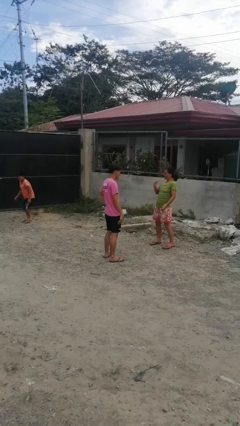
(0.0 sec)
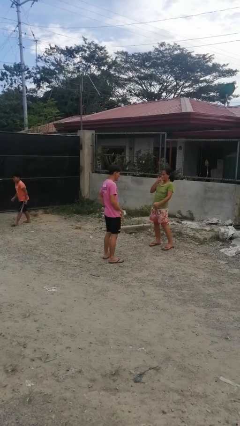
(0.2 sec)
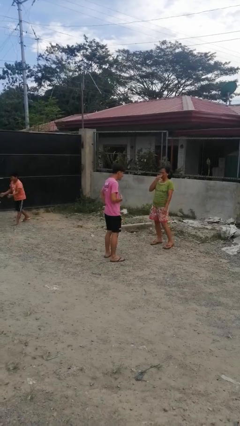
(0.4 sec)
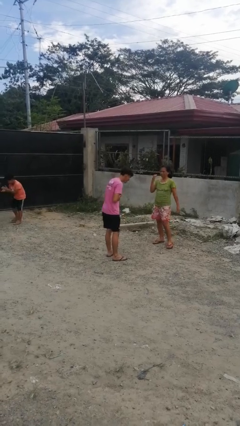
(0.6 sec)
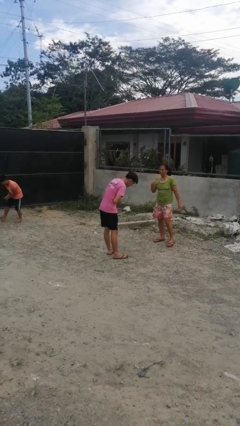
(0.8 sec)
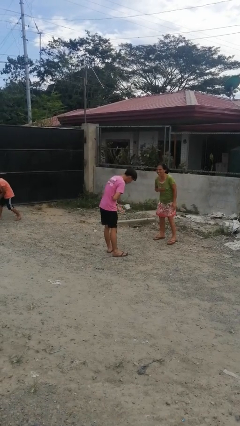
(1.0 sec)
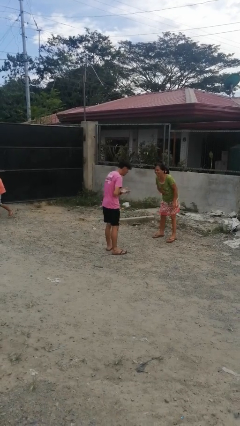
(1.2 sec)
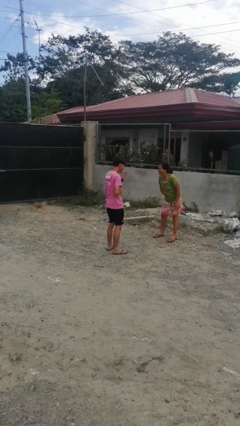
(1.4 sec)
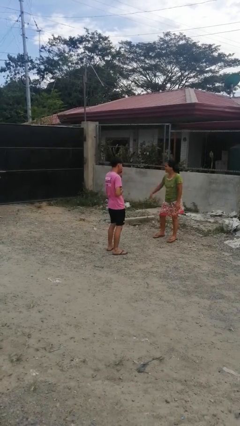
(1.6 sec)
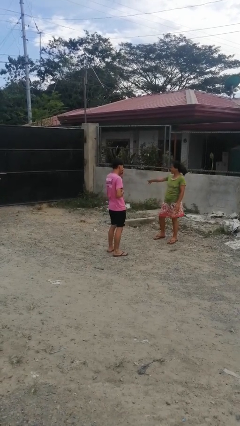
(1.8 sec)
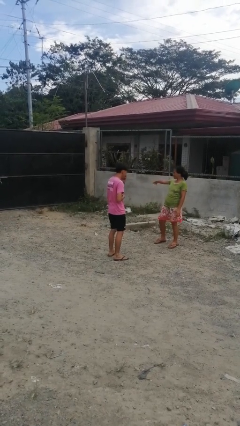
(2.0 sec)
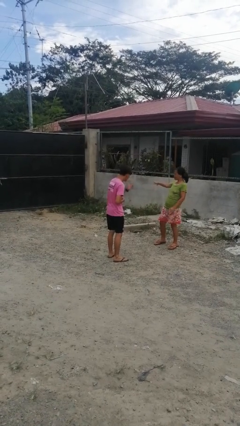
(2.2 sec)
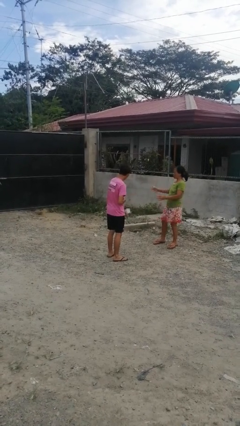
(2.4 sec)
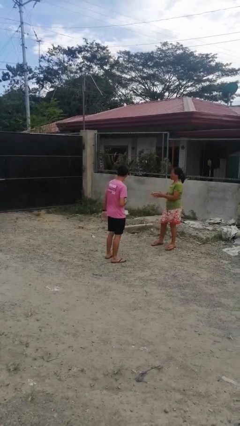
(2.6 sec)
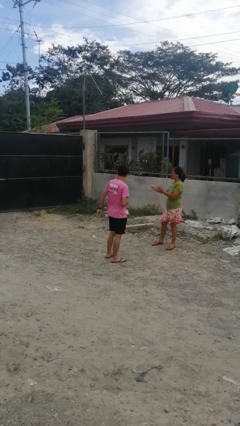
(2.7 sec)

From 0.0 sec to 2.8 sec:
person laughs with person

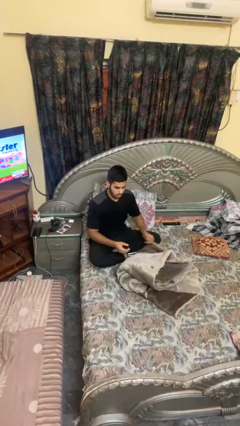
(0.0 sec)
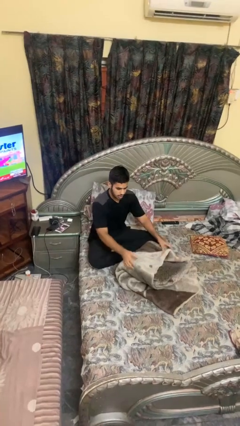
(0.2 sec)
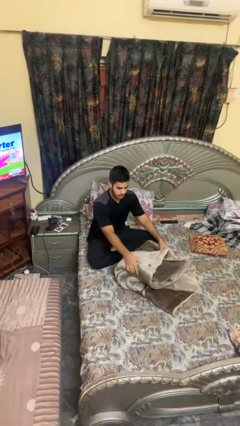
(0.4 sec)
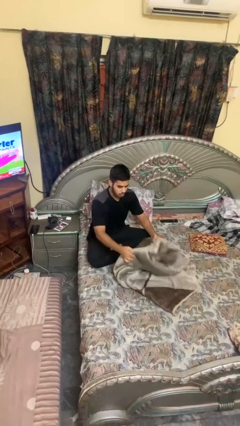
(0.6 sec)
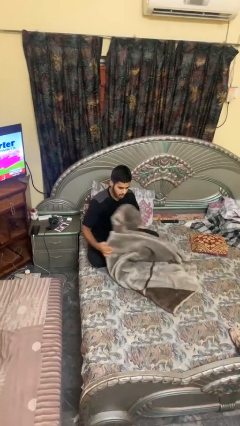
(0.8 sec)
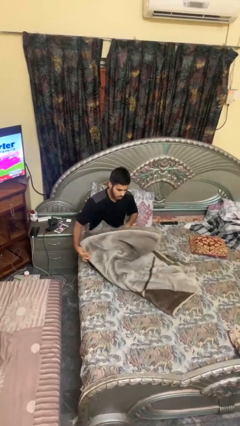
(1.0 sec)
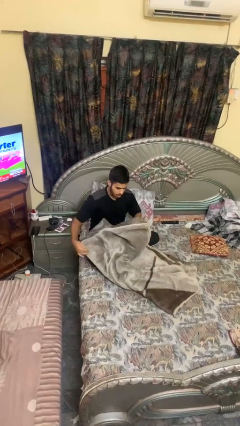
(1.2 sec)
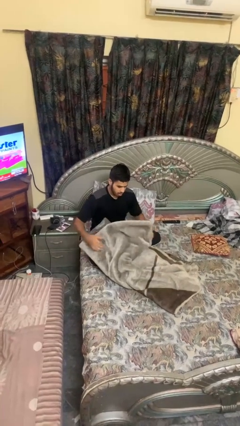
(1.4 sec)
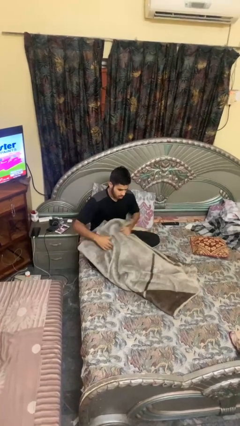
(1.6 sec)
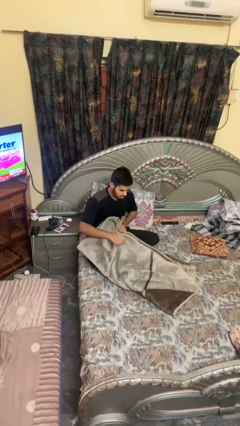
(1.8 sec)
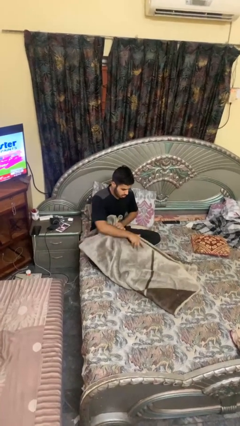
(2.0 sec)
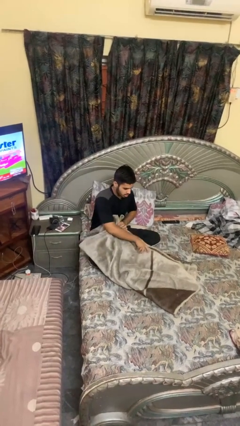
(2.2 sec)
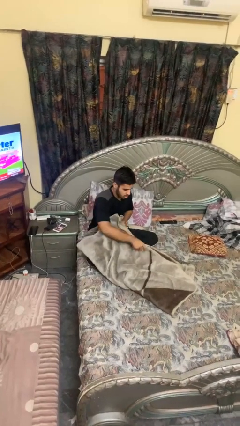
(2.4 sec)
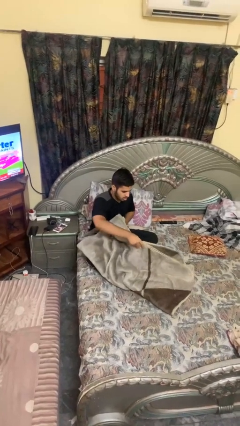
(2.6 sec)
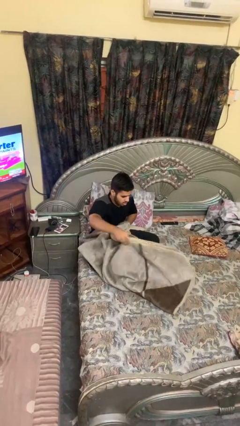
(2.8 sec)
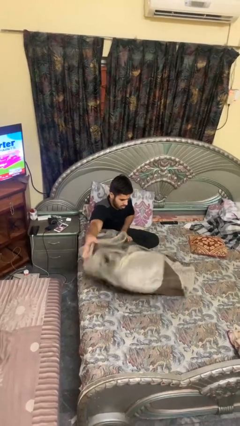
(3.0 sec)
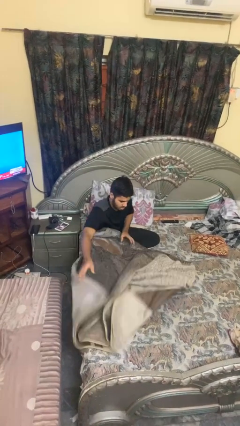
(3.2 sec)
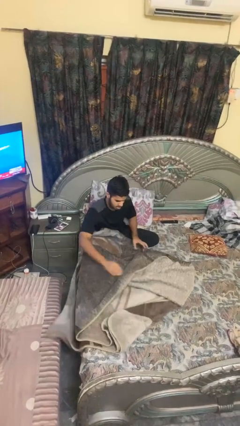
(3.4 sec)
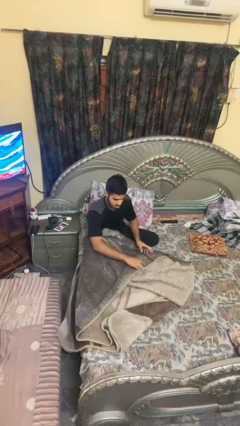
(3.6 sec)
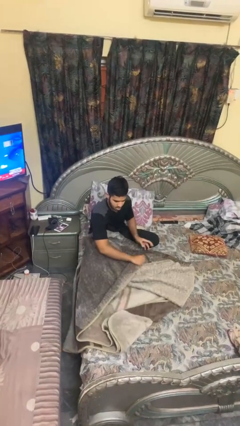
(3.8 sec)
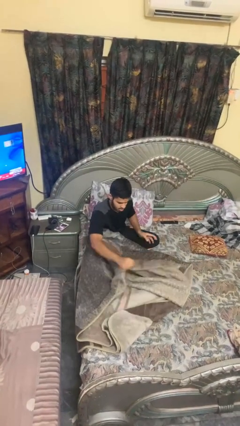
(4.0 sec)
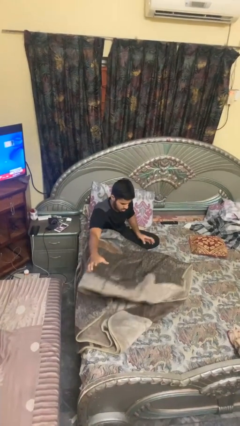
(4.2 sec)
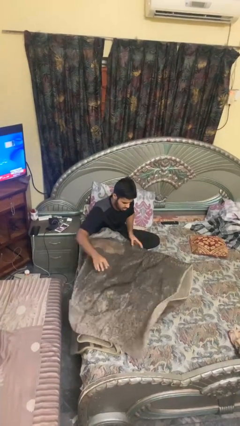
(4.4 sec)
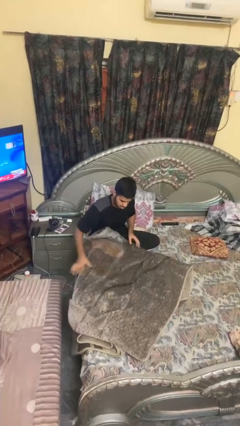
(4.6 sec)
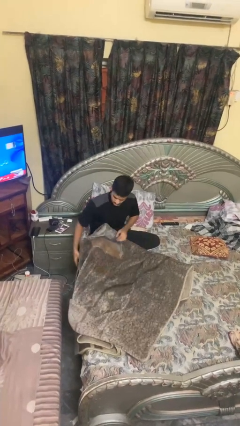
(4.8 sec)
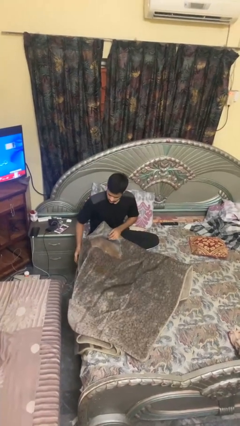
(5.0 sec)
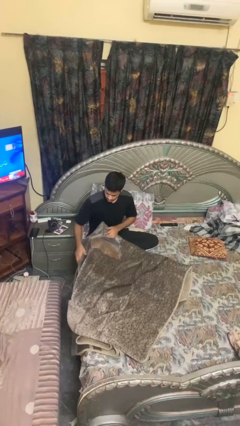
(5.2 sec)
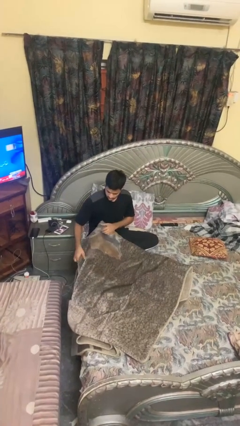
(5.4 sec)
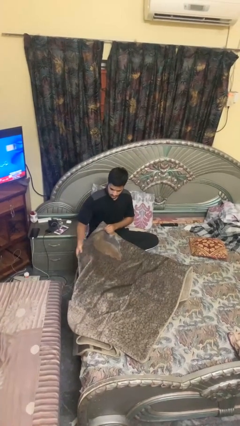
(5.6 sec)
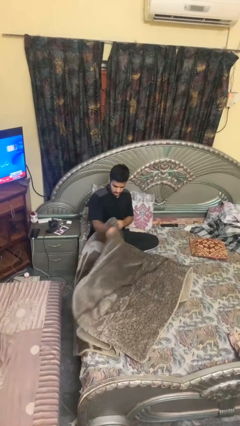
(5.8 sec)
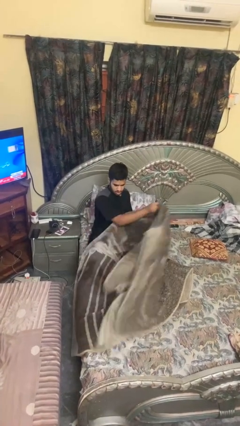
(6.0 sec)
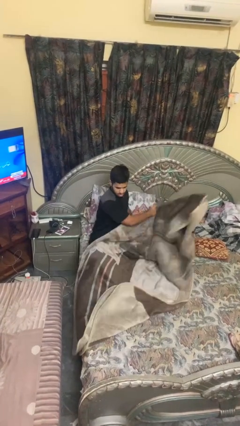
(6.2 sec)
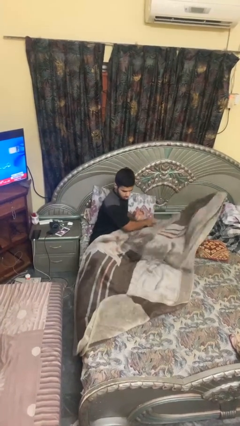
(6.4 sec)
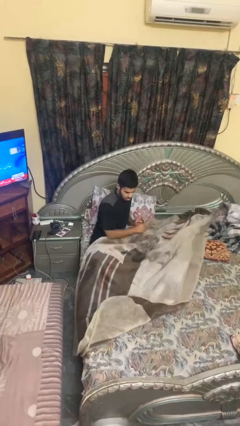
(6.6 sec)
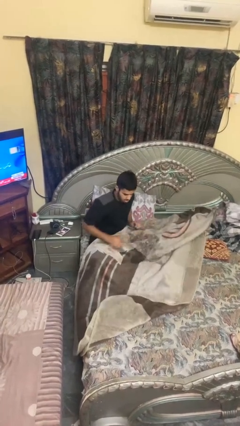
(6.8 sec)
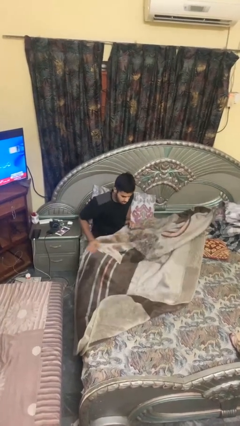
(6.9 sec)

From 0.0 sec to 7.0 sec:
person unfolds blanket

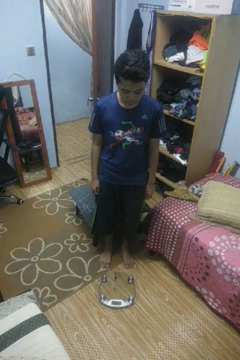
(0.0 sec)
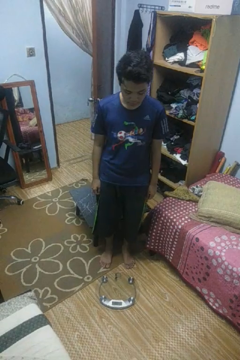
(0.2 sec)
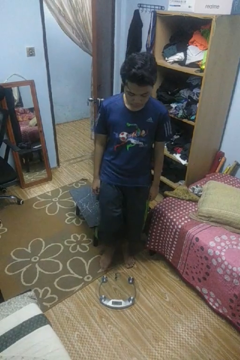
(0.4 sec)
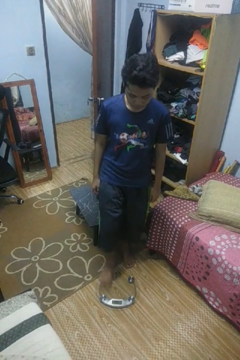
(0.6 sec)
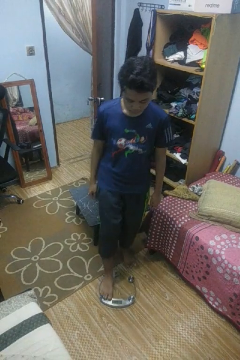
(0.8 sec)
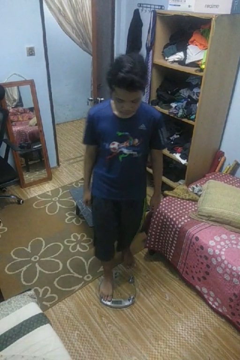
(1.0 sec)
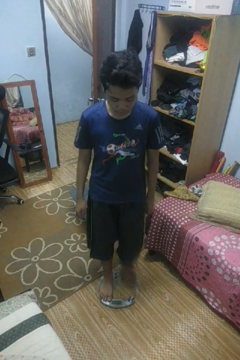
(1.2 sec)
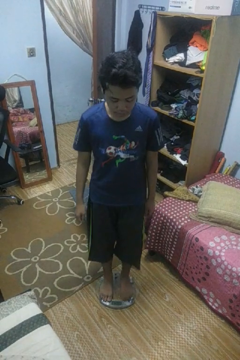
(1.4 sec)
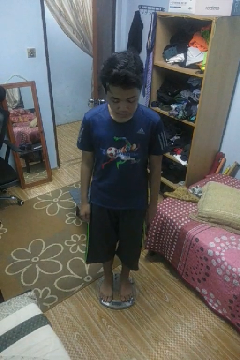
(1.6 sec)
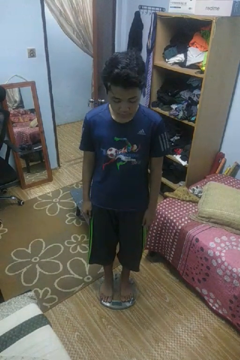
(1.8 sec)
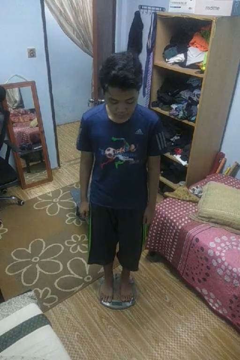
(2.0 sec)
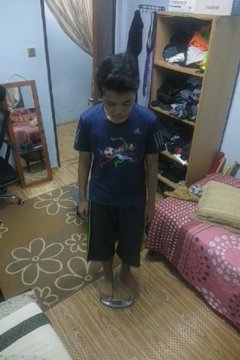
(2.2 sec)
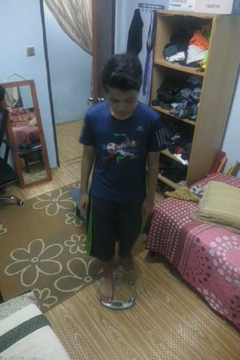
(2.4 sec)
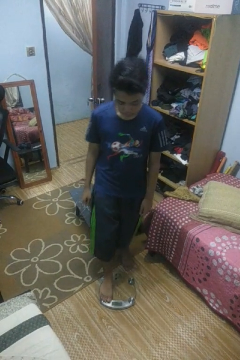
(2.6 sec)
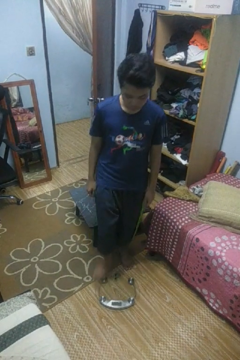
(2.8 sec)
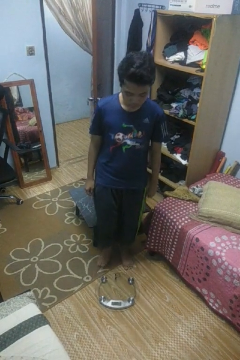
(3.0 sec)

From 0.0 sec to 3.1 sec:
person uses bodyweight scale

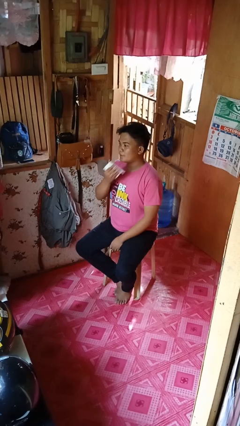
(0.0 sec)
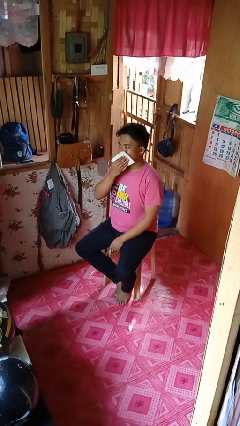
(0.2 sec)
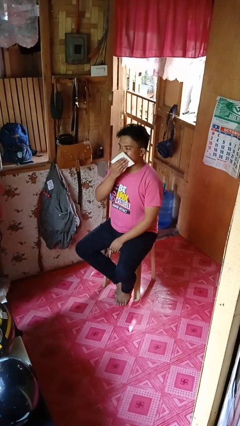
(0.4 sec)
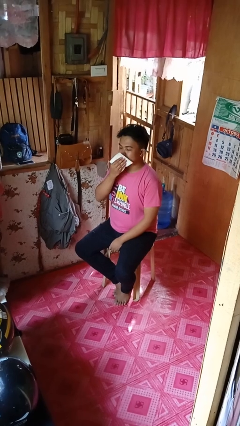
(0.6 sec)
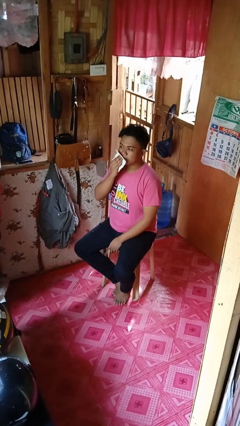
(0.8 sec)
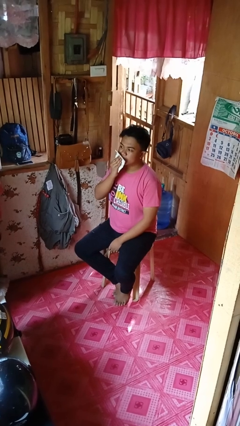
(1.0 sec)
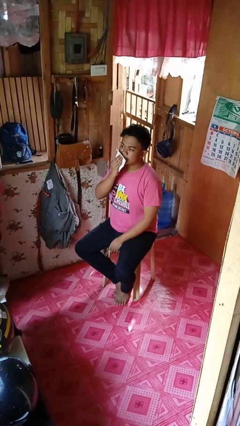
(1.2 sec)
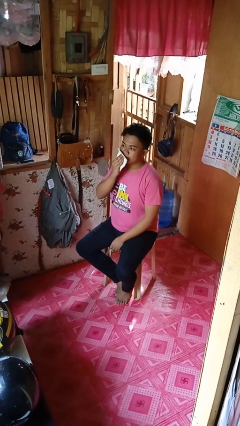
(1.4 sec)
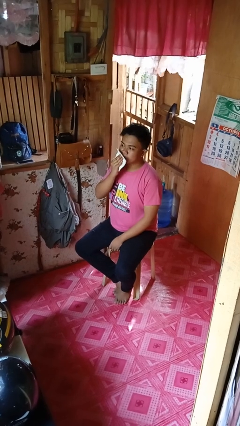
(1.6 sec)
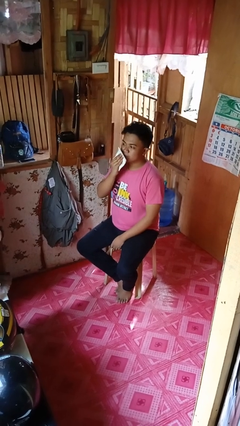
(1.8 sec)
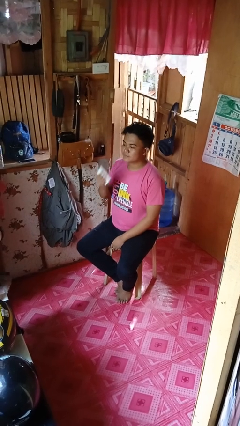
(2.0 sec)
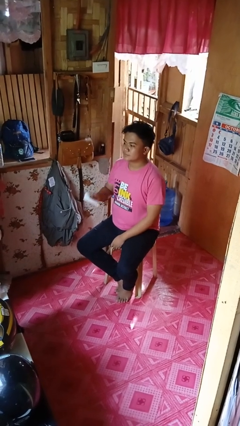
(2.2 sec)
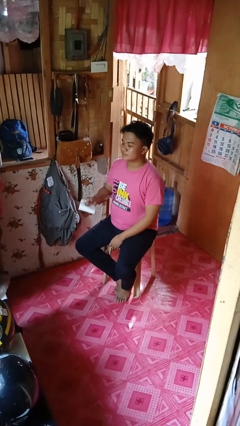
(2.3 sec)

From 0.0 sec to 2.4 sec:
person wipes mouth with napkin

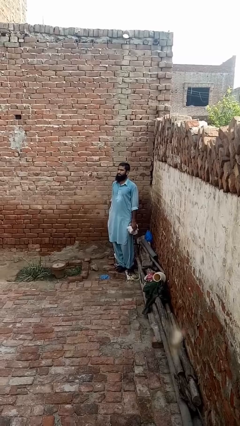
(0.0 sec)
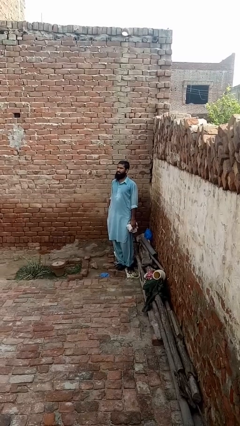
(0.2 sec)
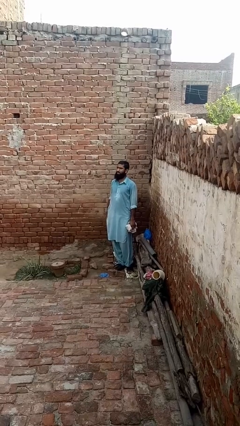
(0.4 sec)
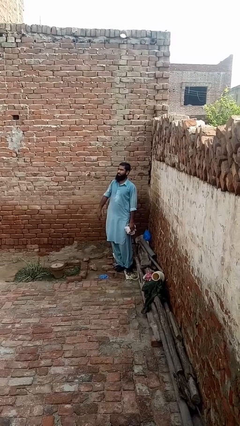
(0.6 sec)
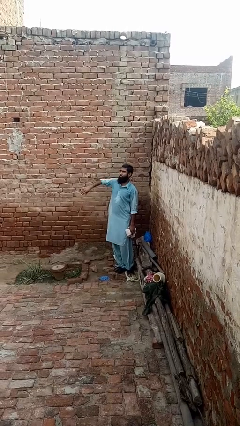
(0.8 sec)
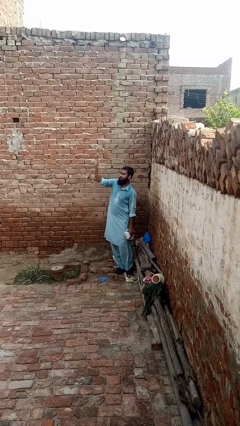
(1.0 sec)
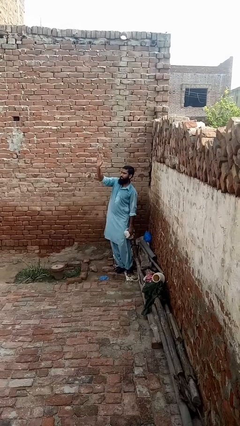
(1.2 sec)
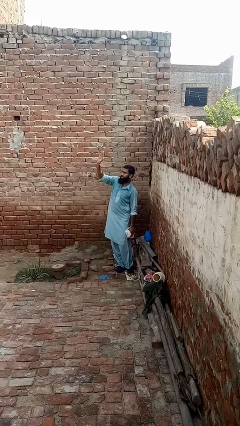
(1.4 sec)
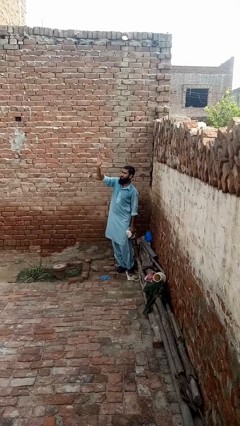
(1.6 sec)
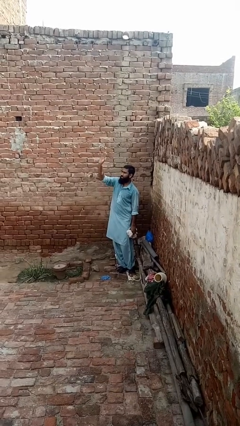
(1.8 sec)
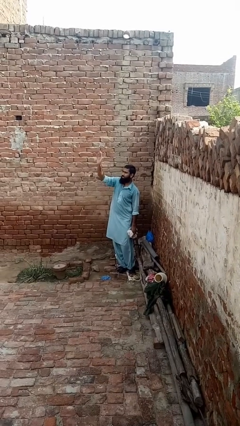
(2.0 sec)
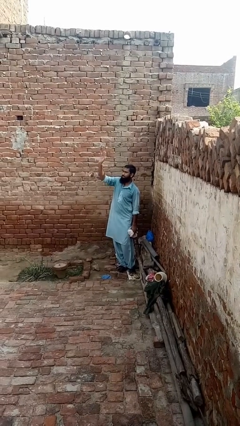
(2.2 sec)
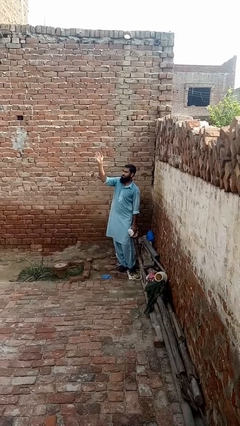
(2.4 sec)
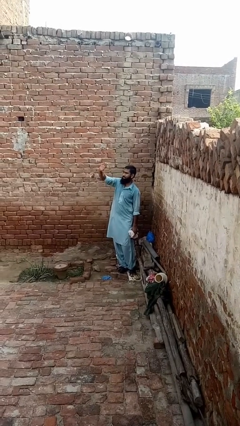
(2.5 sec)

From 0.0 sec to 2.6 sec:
person waves at person

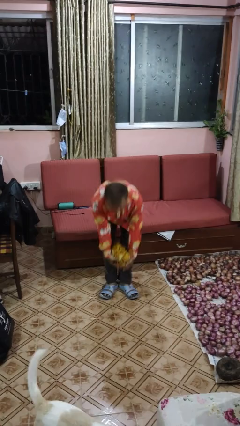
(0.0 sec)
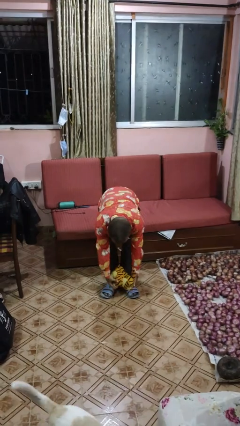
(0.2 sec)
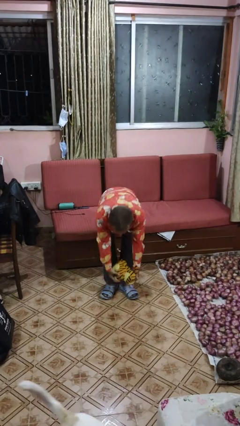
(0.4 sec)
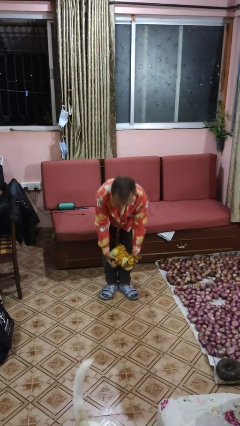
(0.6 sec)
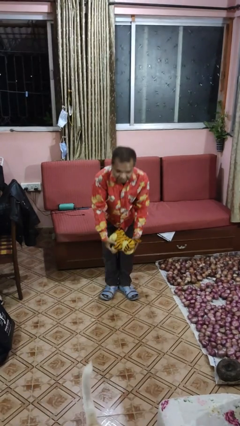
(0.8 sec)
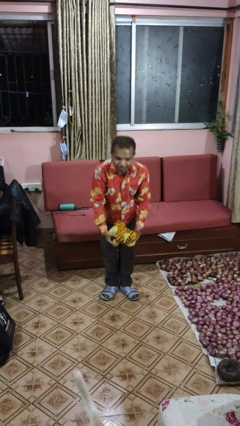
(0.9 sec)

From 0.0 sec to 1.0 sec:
person catches dropped object
